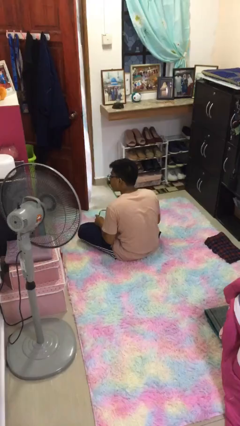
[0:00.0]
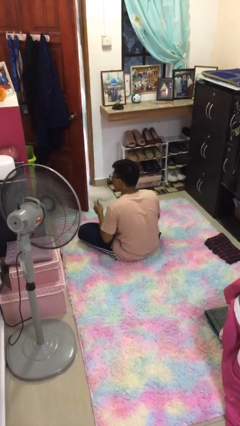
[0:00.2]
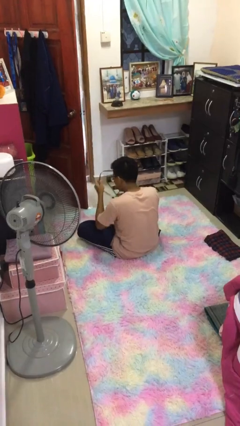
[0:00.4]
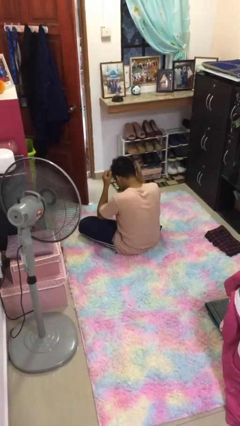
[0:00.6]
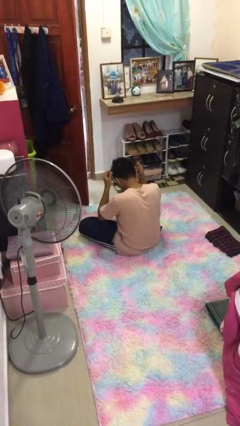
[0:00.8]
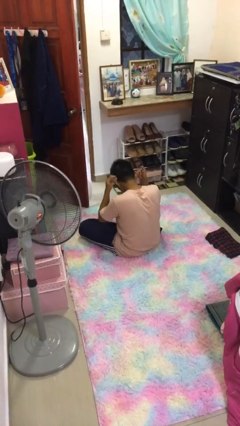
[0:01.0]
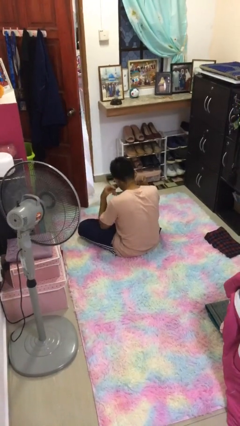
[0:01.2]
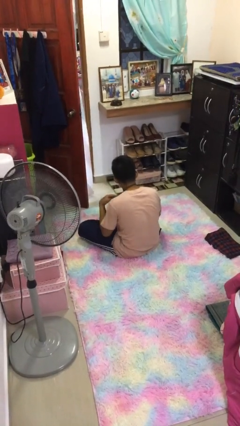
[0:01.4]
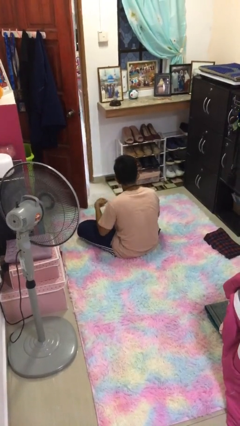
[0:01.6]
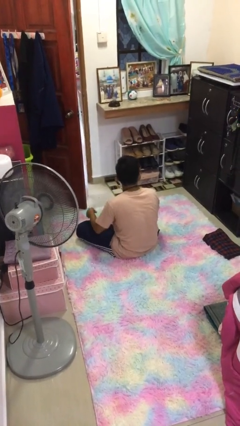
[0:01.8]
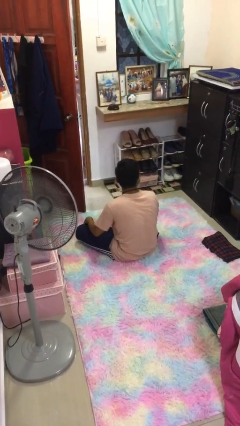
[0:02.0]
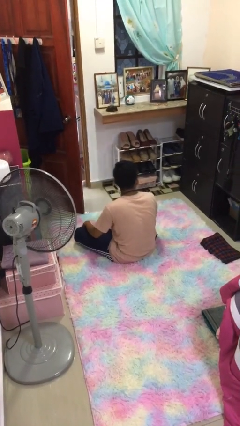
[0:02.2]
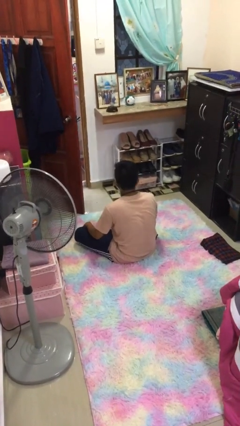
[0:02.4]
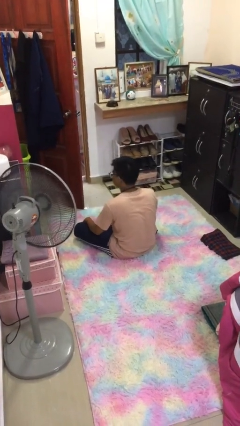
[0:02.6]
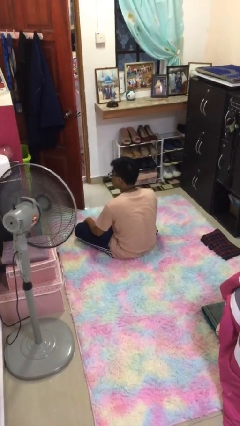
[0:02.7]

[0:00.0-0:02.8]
person puts on necklace

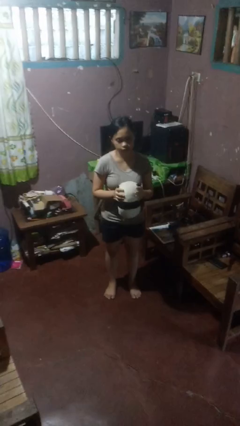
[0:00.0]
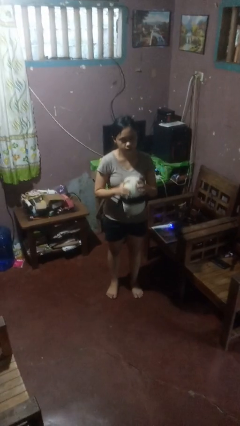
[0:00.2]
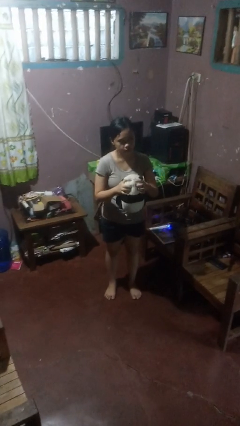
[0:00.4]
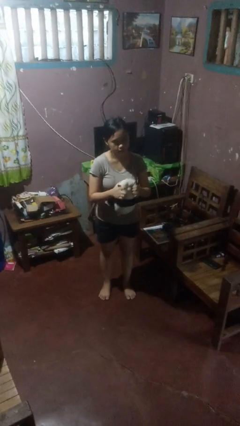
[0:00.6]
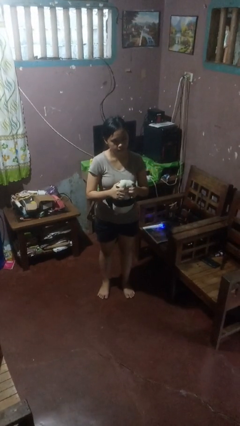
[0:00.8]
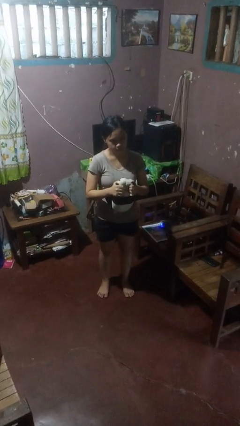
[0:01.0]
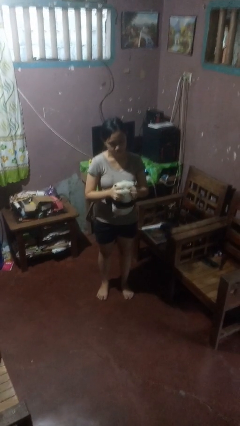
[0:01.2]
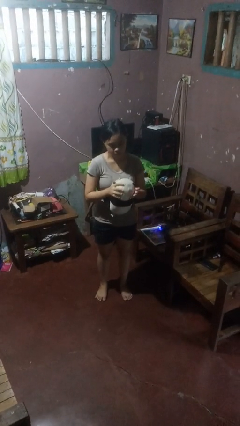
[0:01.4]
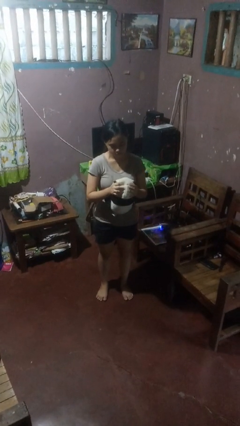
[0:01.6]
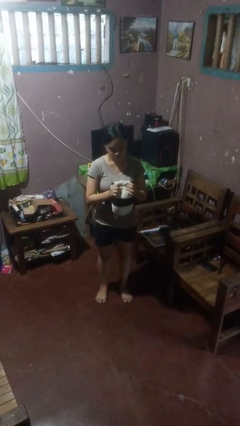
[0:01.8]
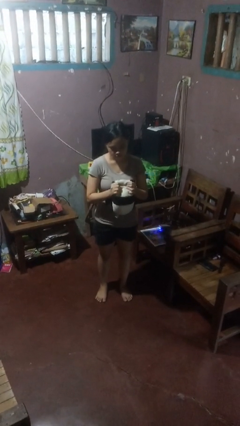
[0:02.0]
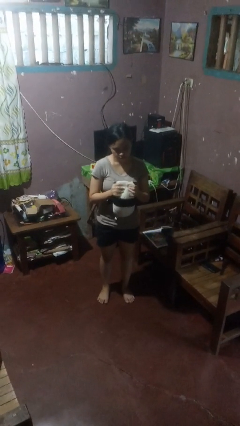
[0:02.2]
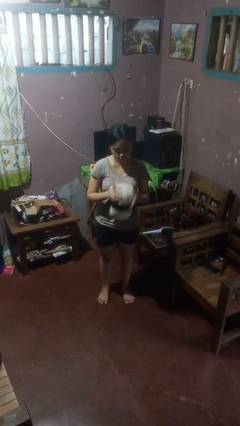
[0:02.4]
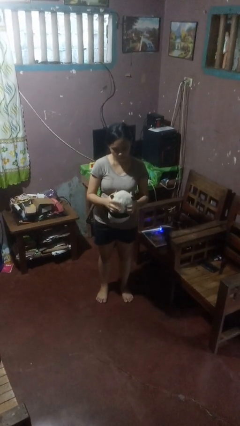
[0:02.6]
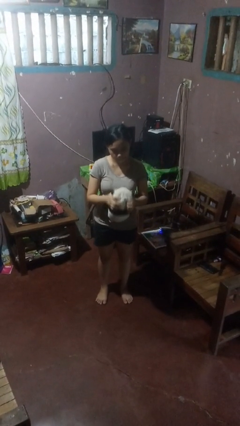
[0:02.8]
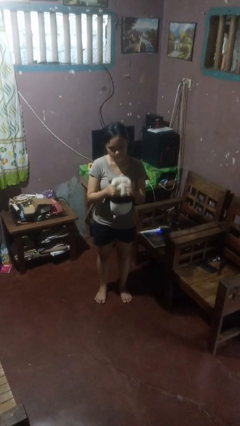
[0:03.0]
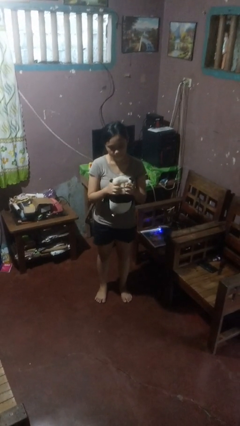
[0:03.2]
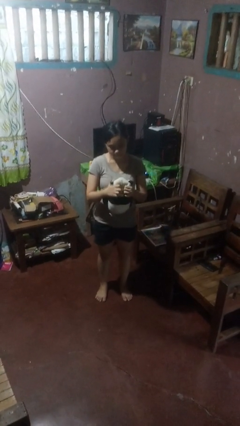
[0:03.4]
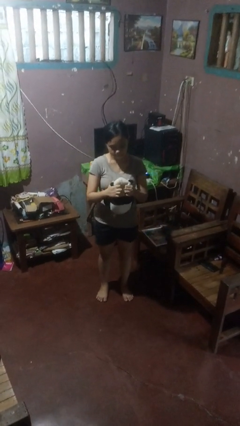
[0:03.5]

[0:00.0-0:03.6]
person squeezes object

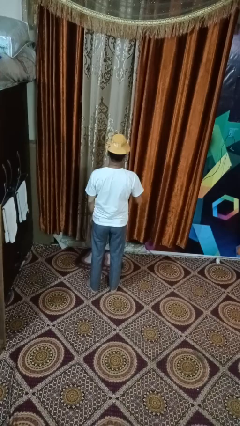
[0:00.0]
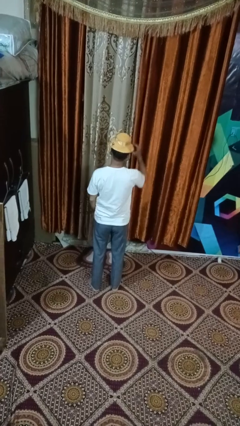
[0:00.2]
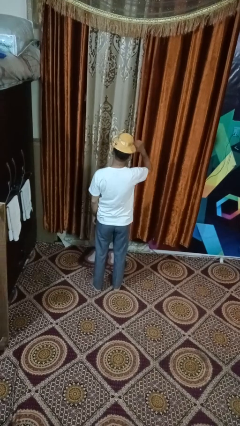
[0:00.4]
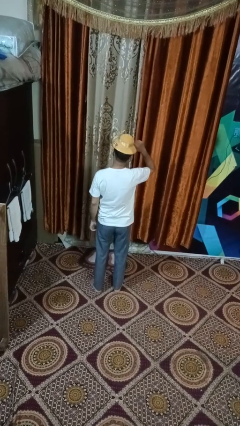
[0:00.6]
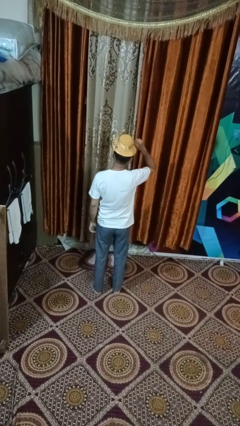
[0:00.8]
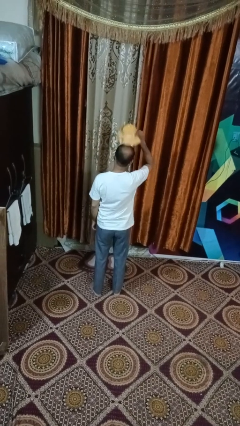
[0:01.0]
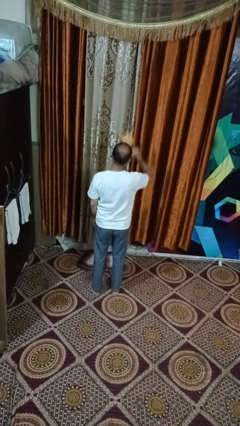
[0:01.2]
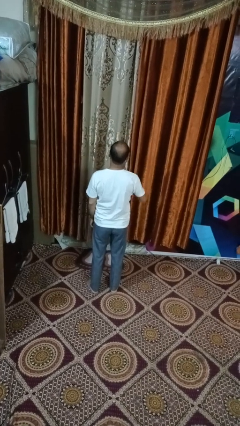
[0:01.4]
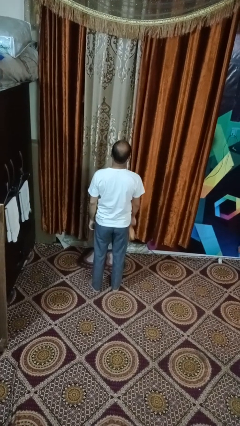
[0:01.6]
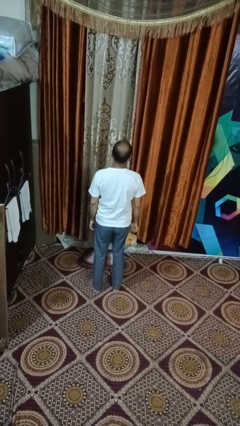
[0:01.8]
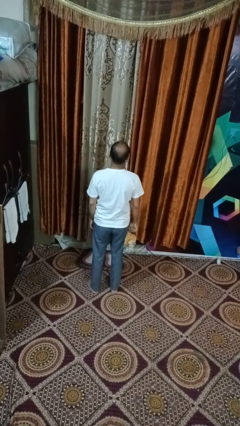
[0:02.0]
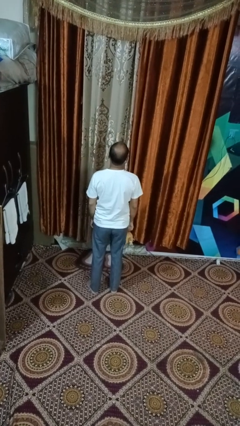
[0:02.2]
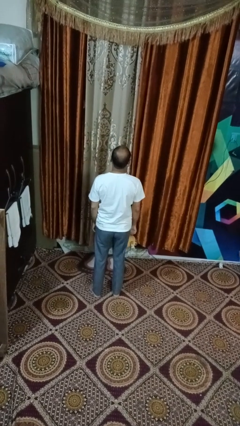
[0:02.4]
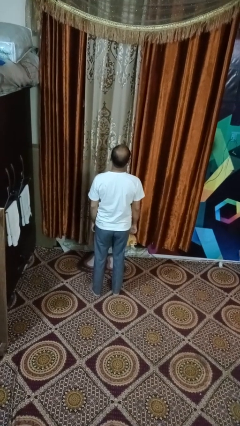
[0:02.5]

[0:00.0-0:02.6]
person takes off hat

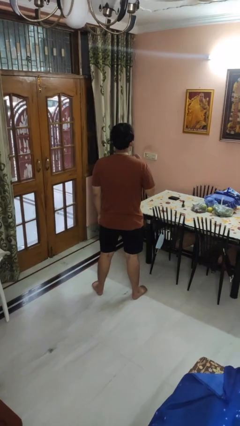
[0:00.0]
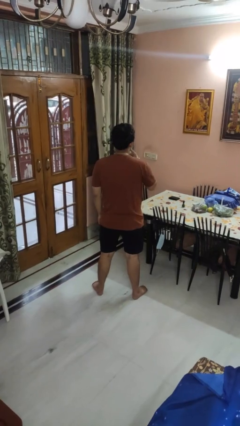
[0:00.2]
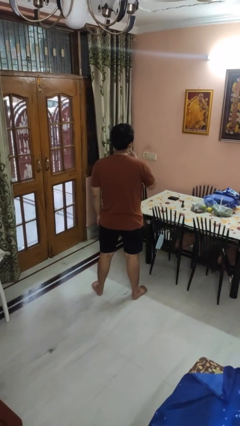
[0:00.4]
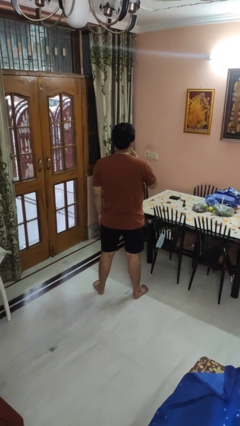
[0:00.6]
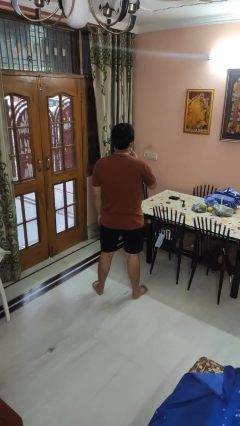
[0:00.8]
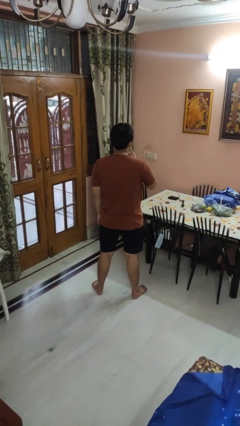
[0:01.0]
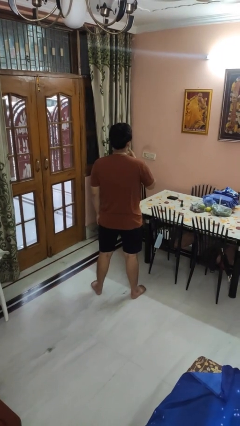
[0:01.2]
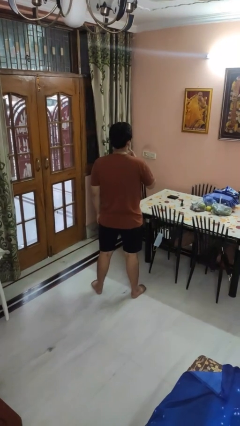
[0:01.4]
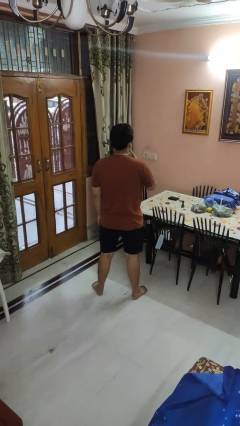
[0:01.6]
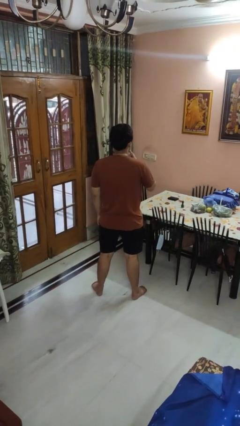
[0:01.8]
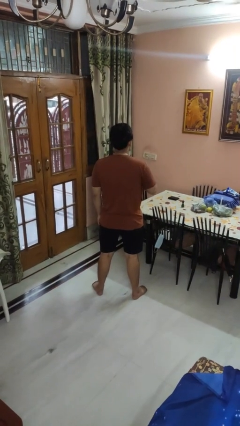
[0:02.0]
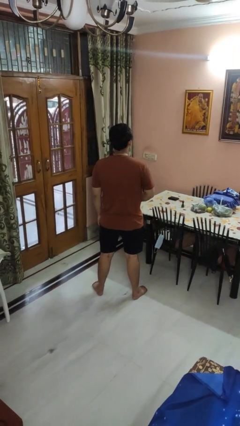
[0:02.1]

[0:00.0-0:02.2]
person strokes chin

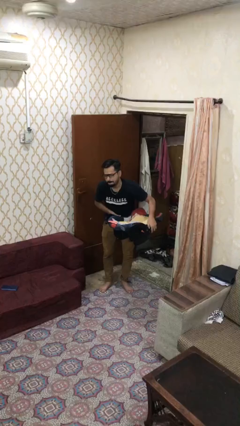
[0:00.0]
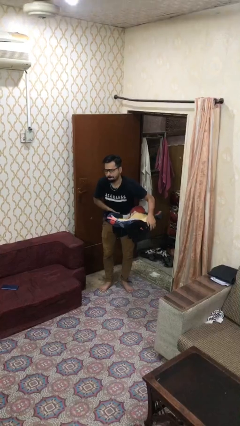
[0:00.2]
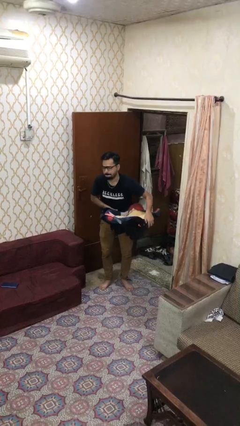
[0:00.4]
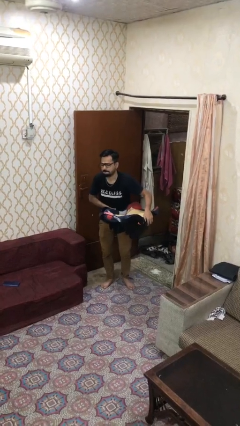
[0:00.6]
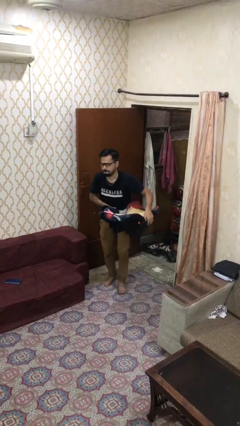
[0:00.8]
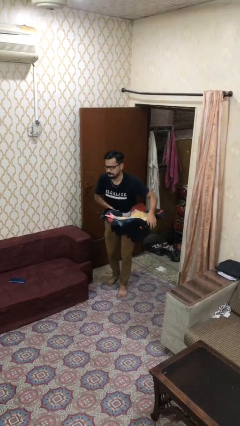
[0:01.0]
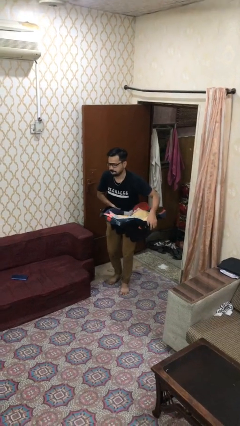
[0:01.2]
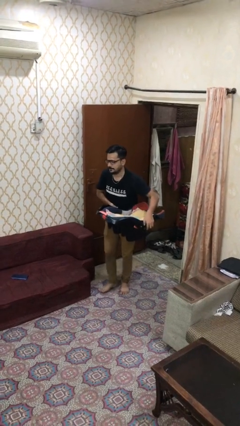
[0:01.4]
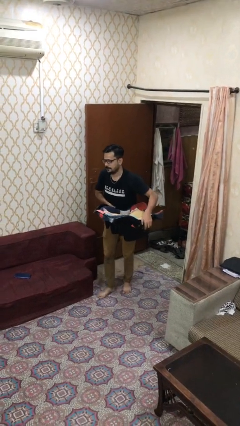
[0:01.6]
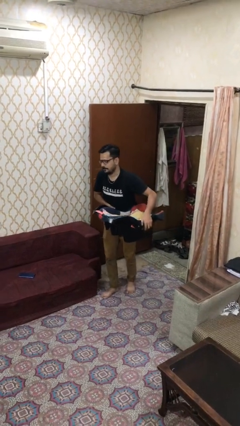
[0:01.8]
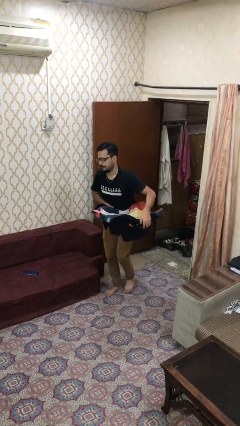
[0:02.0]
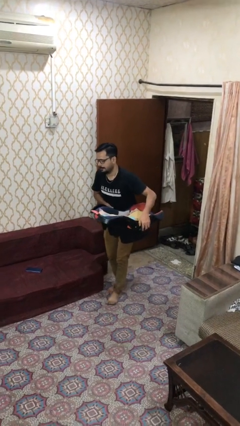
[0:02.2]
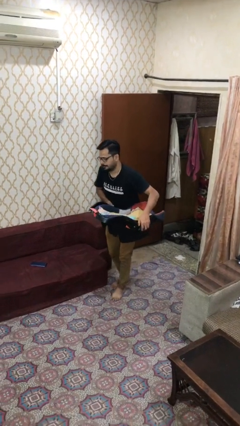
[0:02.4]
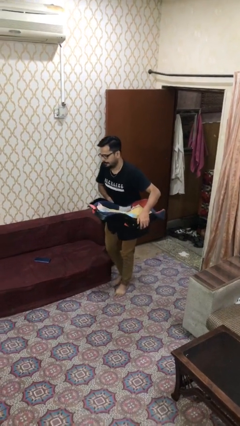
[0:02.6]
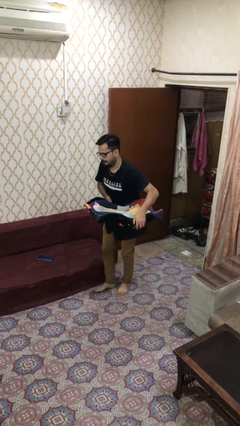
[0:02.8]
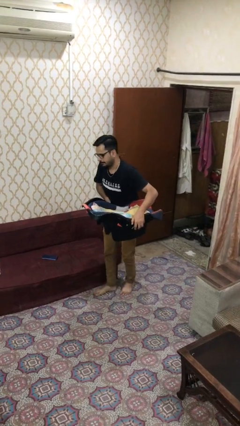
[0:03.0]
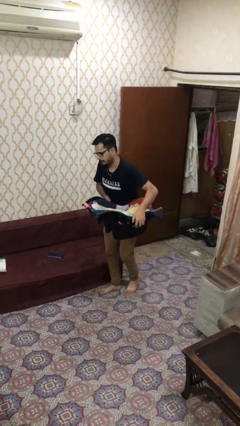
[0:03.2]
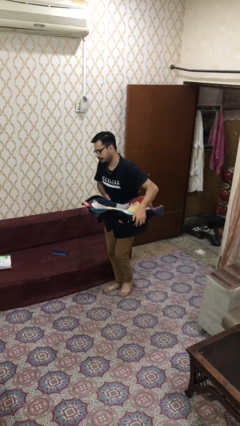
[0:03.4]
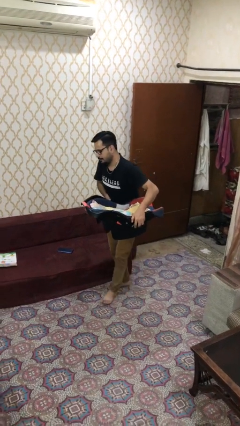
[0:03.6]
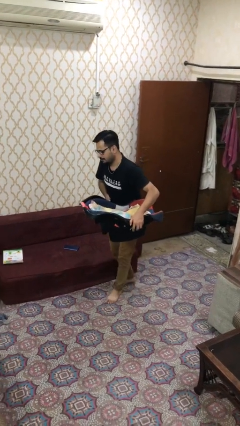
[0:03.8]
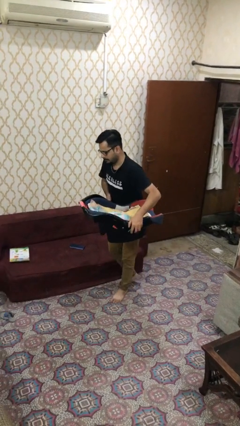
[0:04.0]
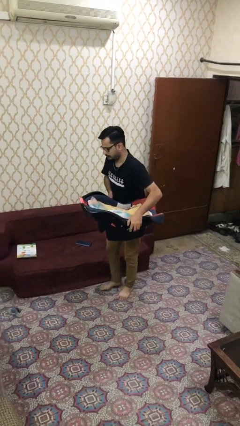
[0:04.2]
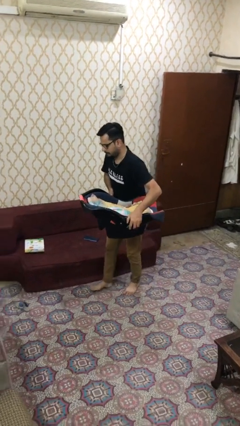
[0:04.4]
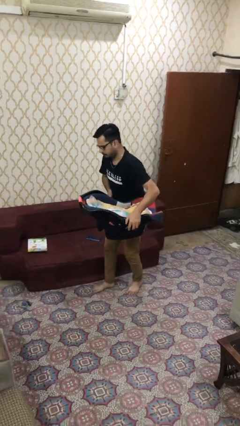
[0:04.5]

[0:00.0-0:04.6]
person carries heavy object

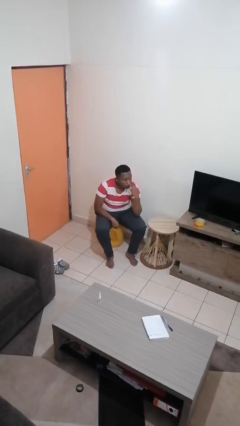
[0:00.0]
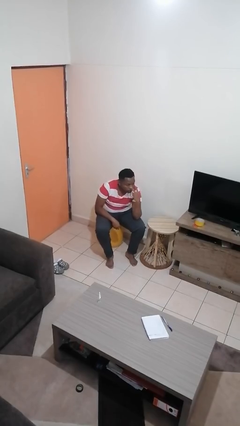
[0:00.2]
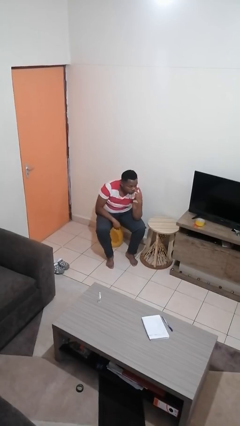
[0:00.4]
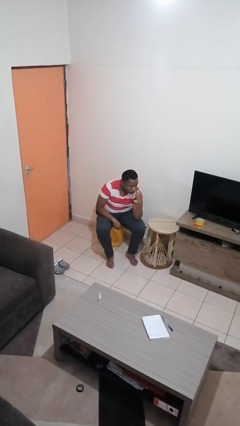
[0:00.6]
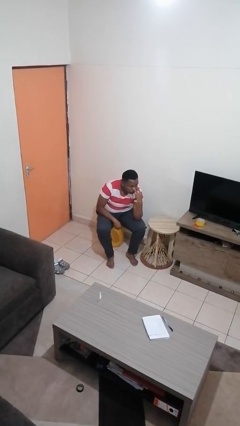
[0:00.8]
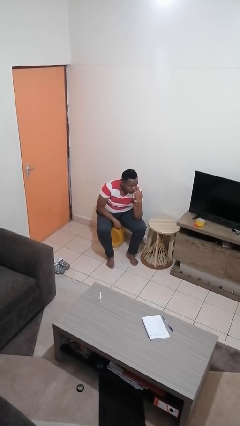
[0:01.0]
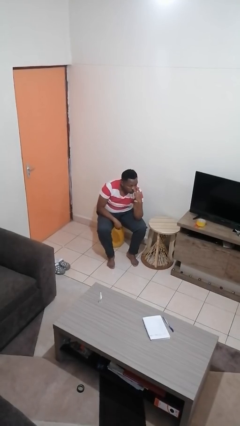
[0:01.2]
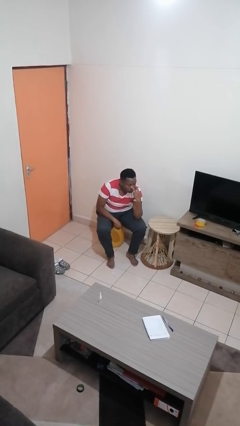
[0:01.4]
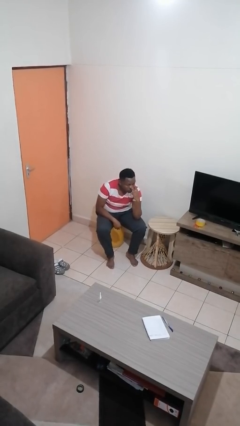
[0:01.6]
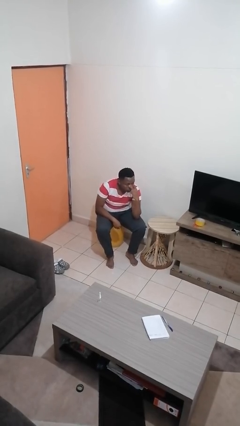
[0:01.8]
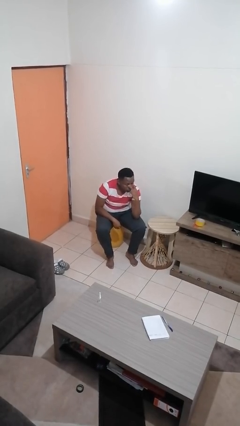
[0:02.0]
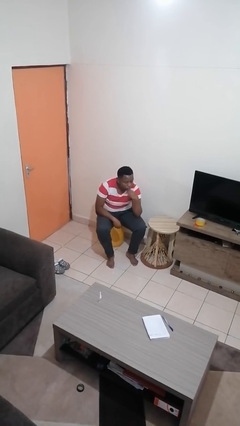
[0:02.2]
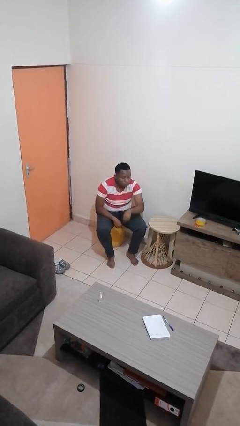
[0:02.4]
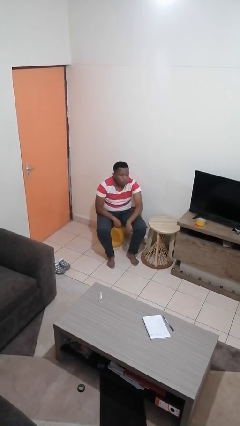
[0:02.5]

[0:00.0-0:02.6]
person gestures watch closely
